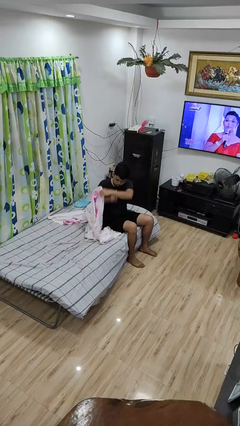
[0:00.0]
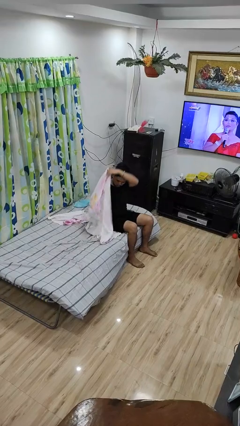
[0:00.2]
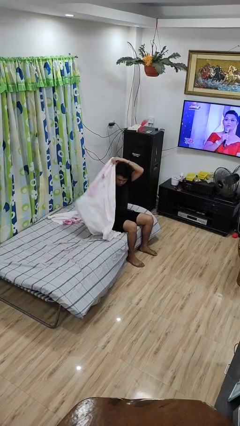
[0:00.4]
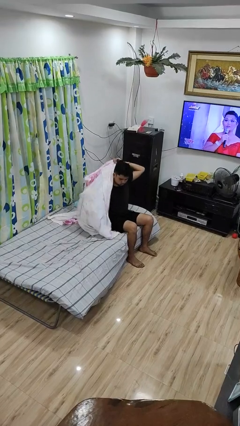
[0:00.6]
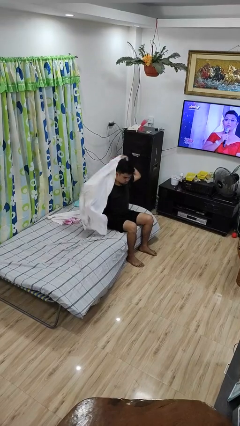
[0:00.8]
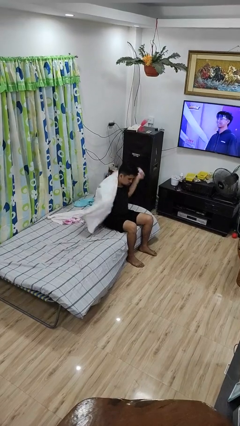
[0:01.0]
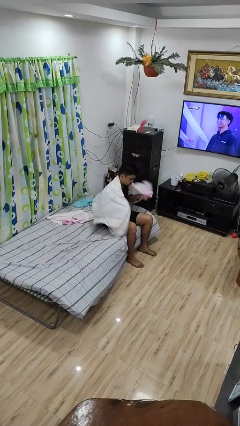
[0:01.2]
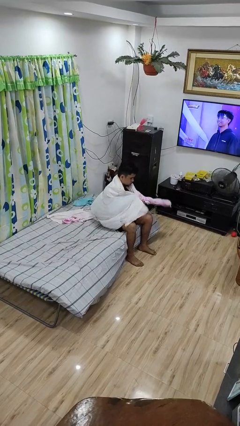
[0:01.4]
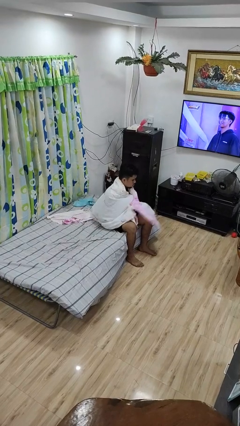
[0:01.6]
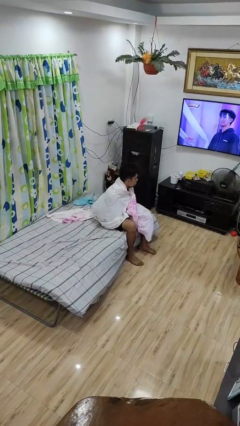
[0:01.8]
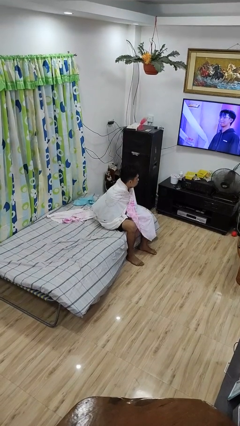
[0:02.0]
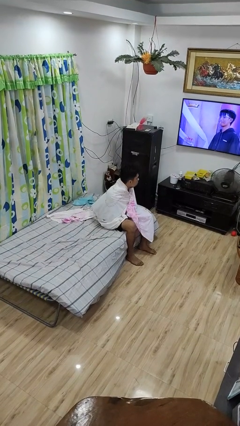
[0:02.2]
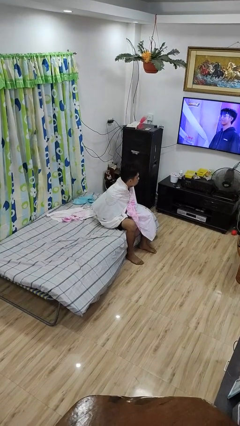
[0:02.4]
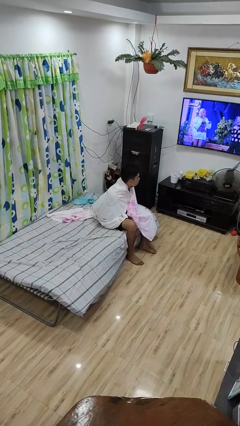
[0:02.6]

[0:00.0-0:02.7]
person covers with blanket

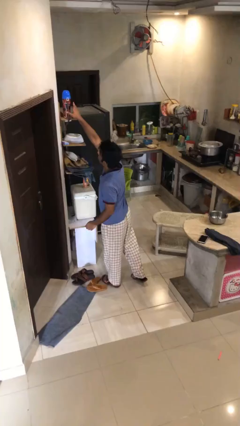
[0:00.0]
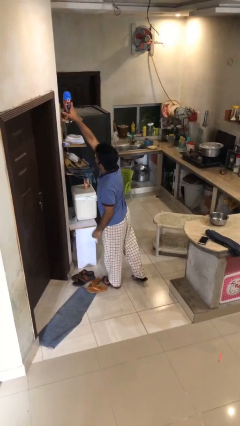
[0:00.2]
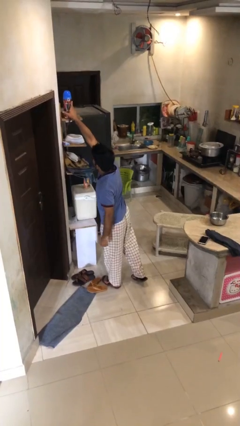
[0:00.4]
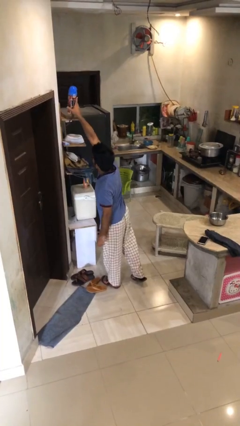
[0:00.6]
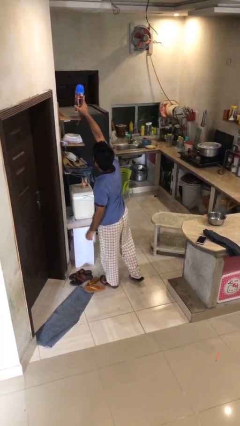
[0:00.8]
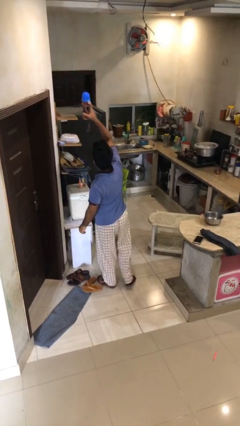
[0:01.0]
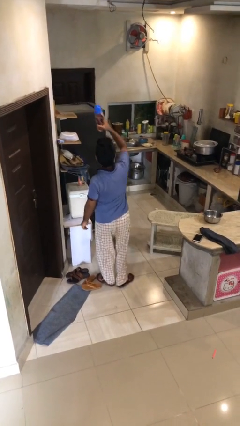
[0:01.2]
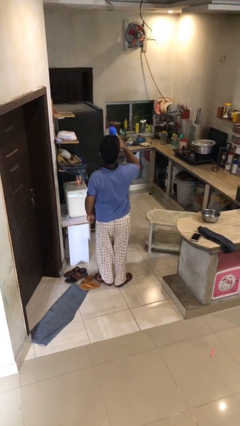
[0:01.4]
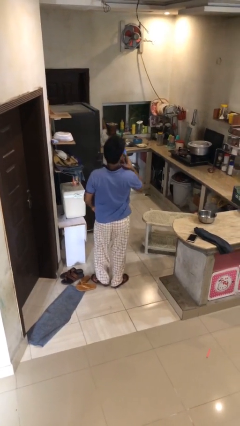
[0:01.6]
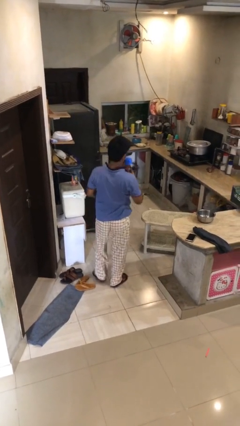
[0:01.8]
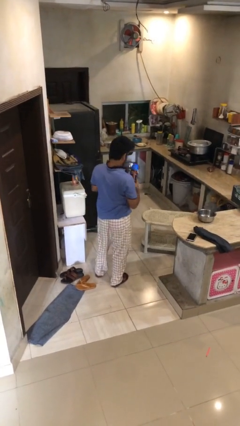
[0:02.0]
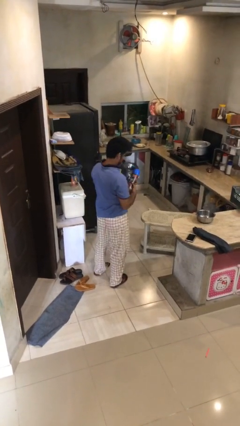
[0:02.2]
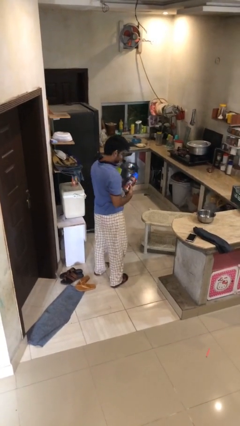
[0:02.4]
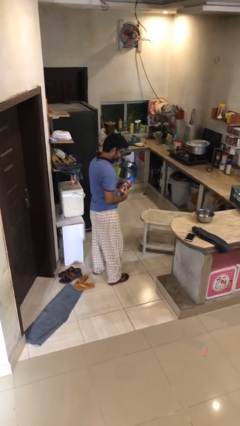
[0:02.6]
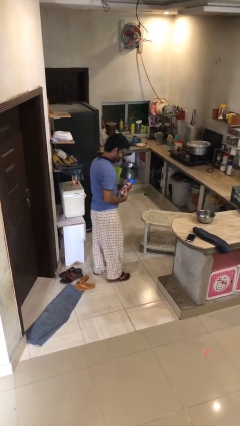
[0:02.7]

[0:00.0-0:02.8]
person picks up object from shelf

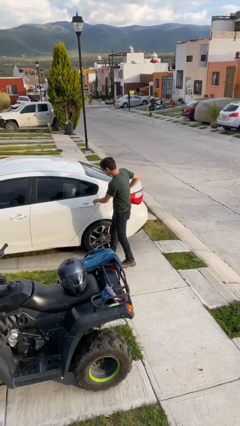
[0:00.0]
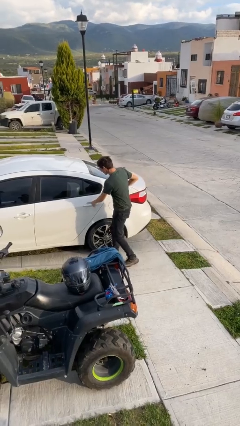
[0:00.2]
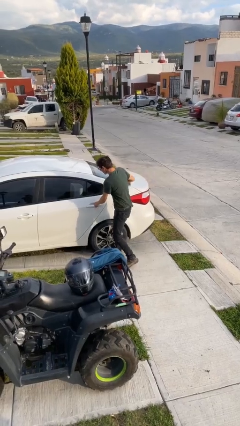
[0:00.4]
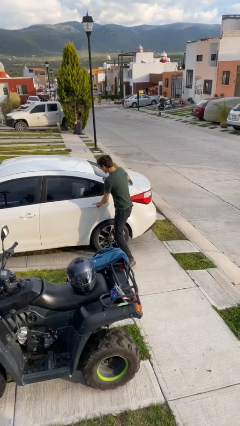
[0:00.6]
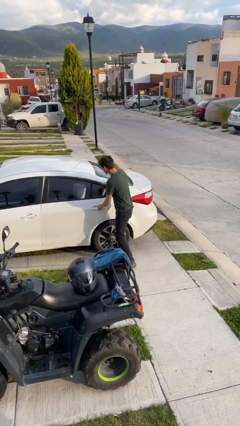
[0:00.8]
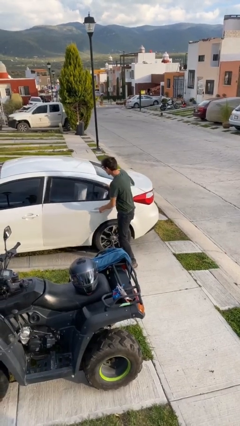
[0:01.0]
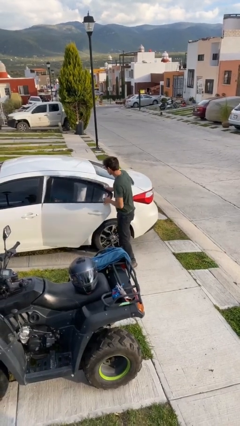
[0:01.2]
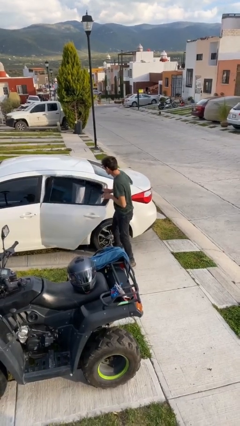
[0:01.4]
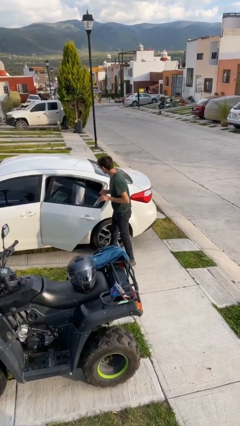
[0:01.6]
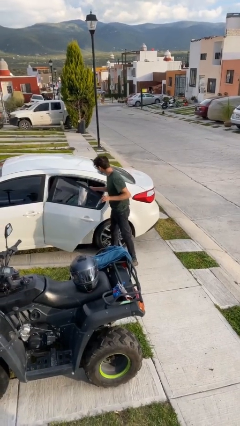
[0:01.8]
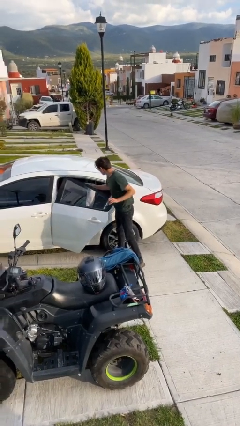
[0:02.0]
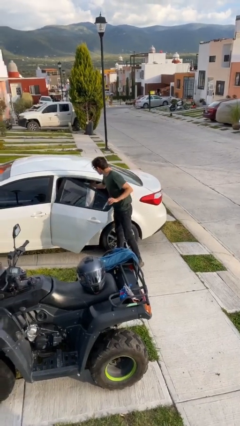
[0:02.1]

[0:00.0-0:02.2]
person opens car door

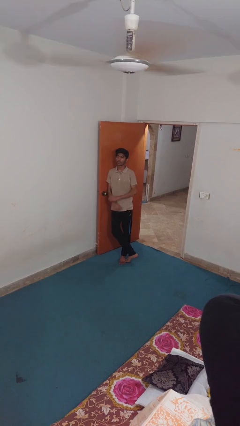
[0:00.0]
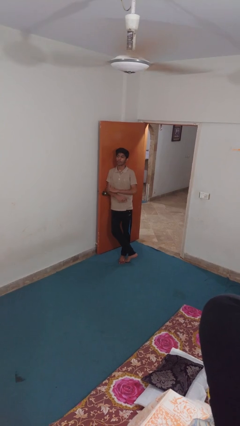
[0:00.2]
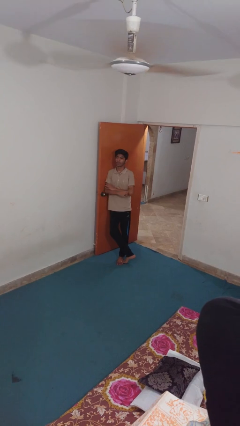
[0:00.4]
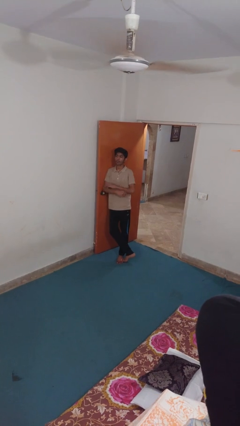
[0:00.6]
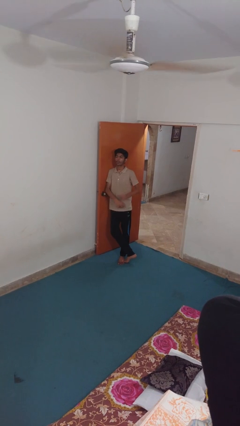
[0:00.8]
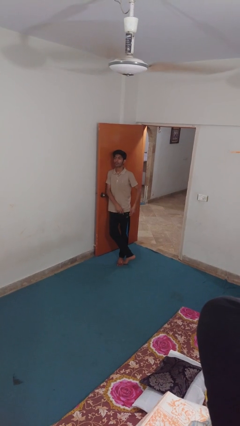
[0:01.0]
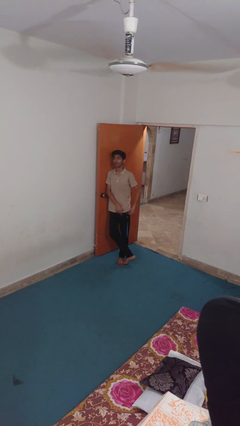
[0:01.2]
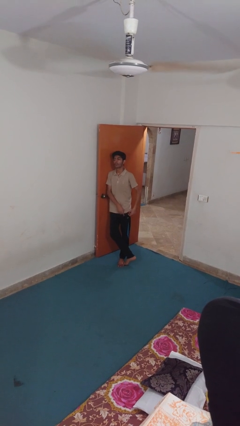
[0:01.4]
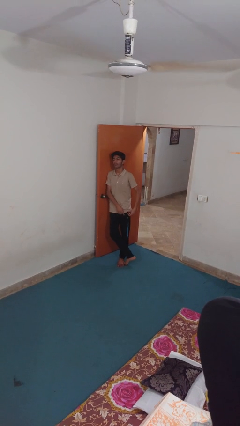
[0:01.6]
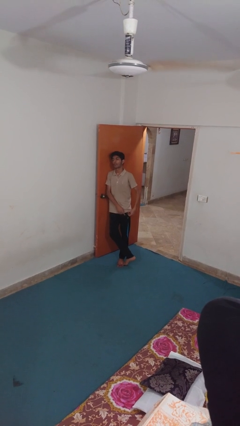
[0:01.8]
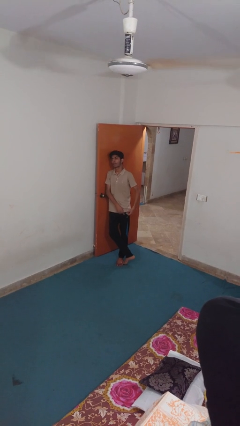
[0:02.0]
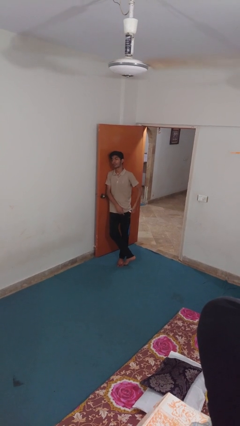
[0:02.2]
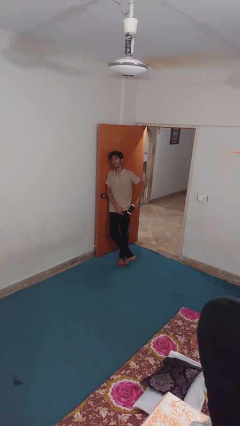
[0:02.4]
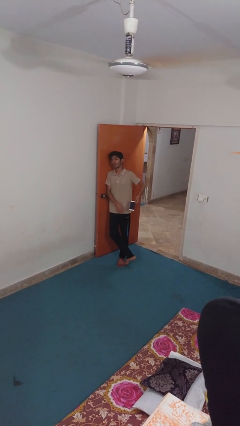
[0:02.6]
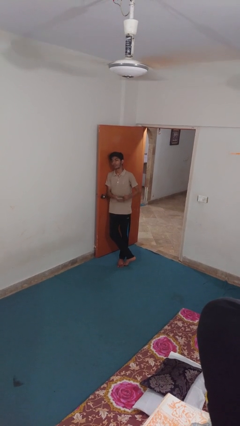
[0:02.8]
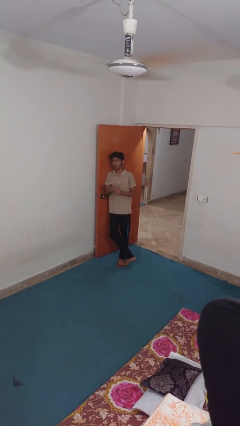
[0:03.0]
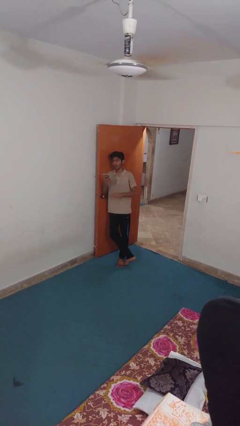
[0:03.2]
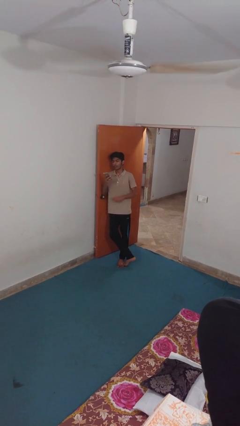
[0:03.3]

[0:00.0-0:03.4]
person takes phone from pocket

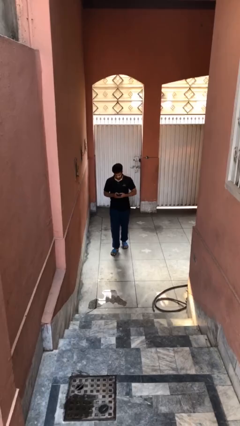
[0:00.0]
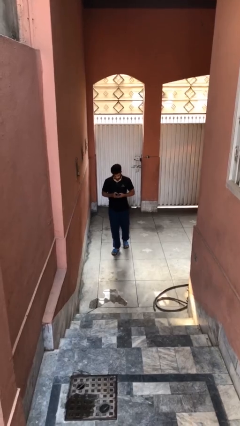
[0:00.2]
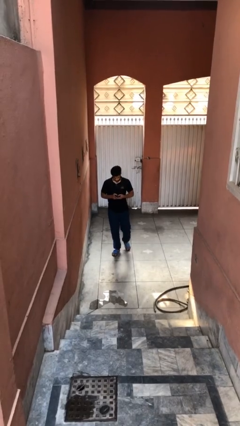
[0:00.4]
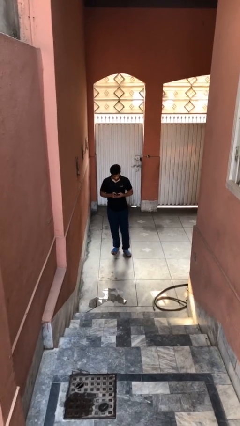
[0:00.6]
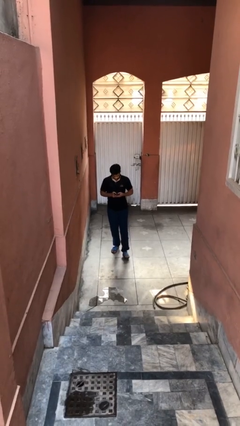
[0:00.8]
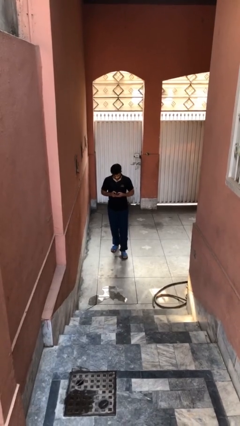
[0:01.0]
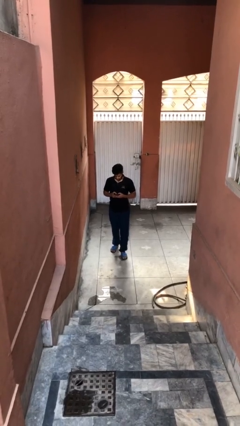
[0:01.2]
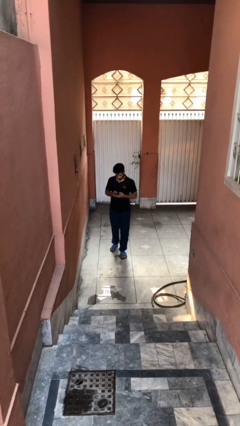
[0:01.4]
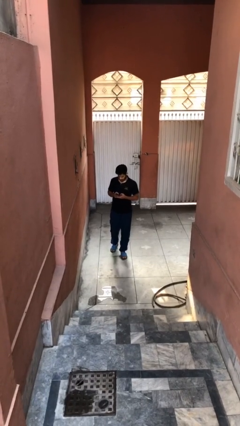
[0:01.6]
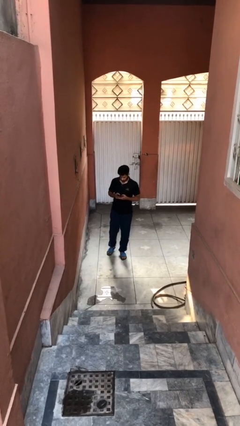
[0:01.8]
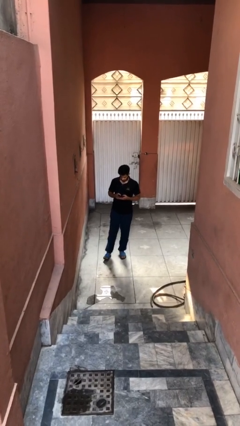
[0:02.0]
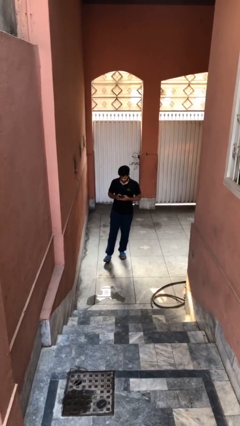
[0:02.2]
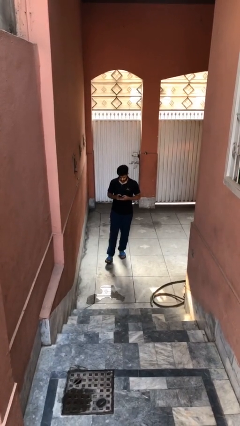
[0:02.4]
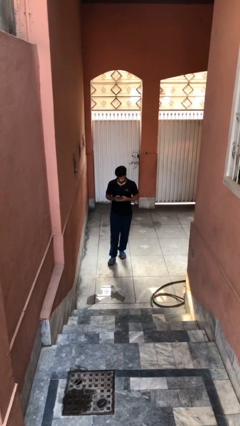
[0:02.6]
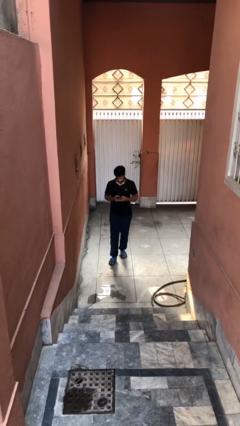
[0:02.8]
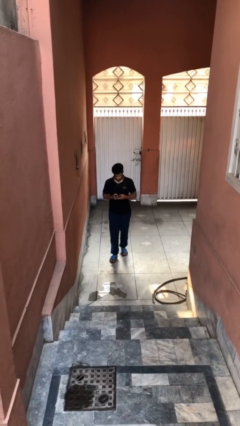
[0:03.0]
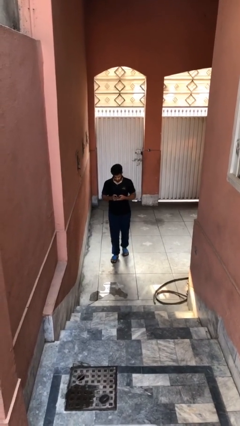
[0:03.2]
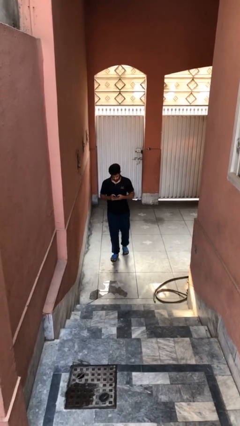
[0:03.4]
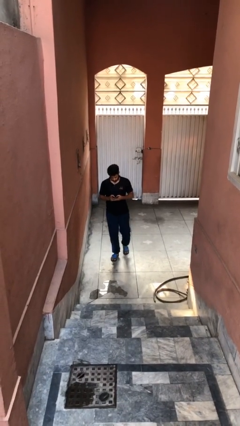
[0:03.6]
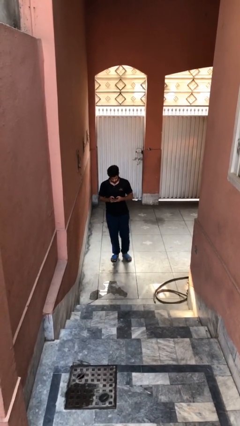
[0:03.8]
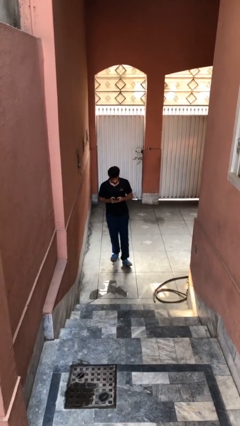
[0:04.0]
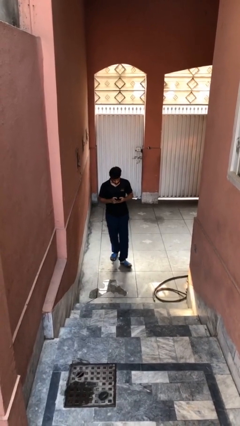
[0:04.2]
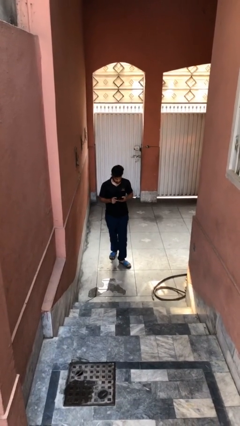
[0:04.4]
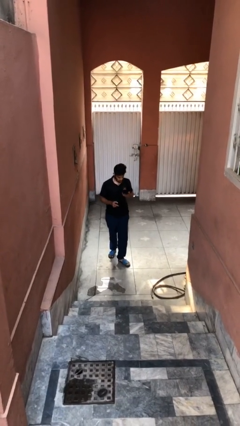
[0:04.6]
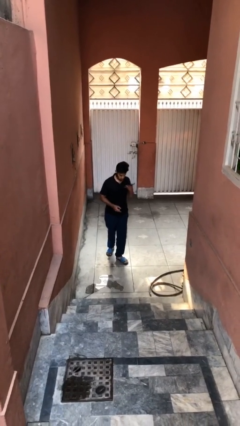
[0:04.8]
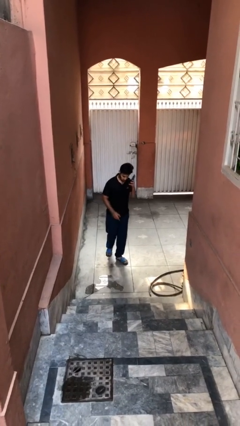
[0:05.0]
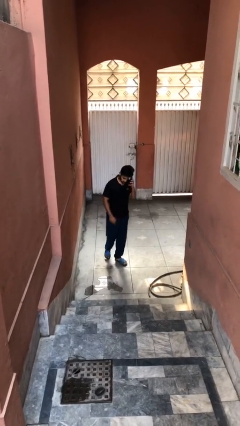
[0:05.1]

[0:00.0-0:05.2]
person texts on phone

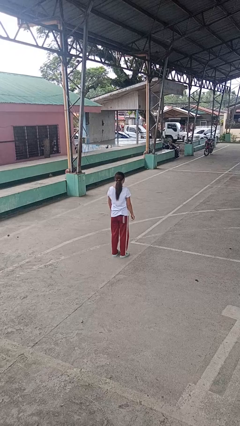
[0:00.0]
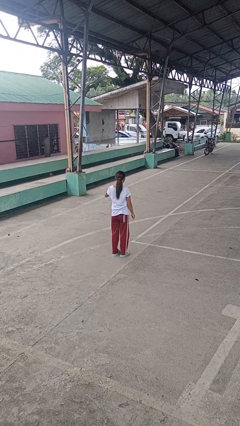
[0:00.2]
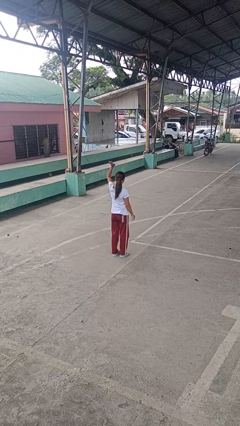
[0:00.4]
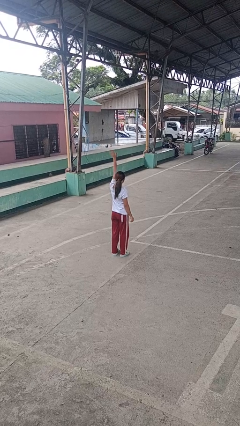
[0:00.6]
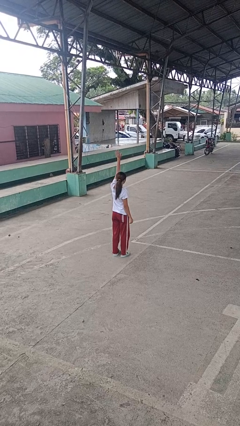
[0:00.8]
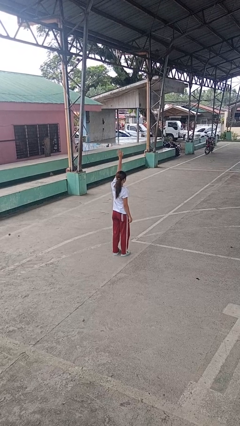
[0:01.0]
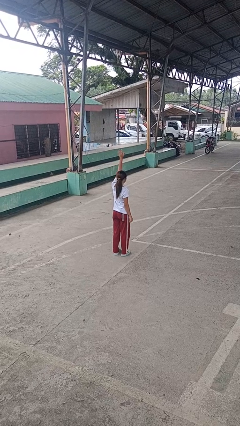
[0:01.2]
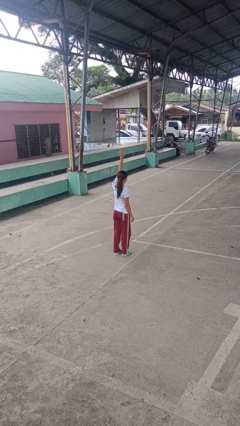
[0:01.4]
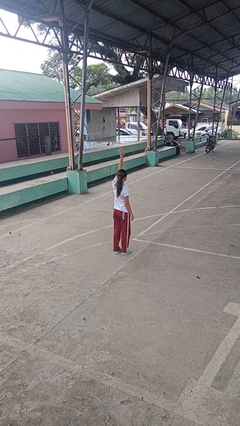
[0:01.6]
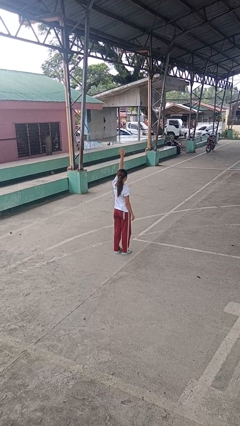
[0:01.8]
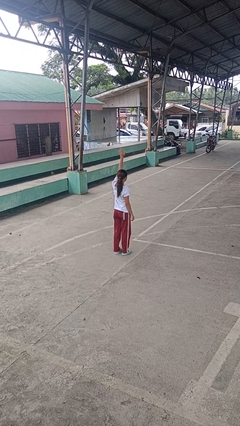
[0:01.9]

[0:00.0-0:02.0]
person gestures raise hand
